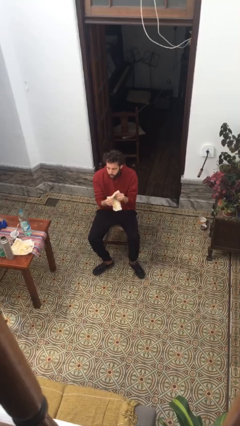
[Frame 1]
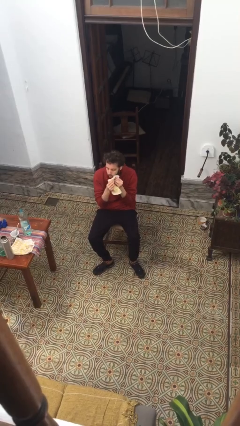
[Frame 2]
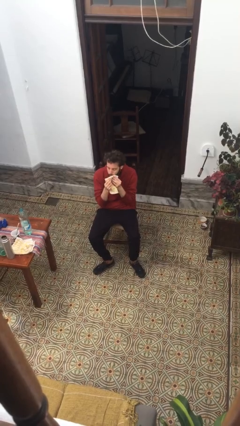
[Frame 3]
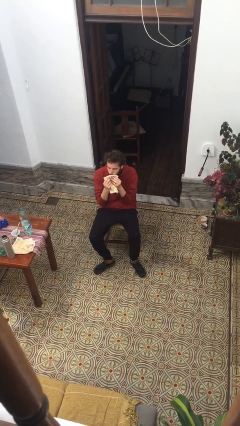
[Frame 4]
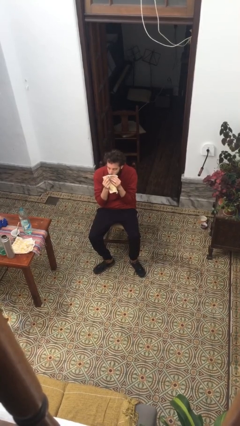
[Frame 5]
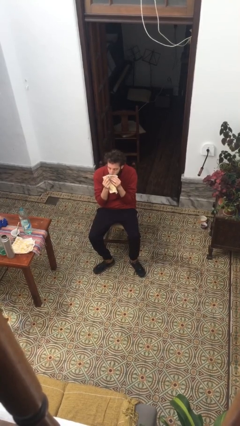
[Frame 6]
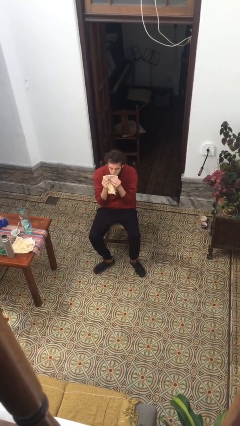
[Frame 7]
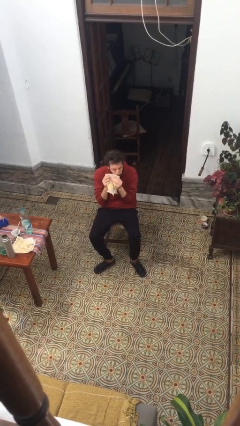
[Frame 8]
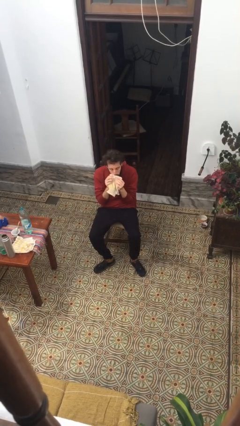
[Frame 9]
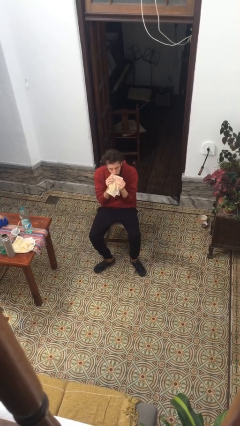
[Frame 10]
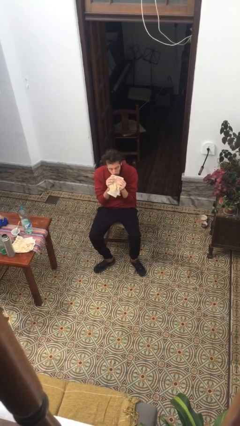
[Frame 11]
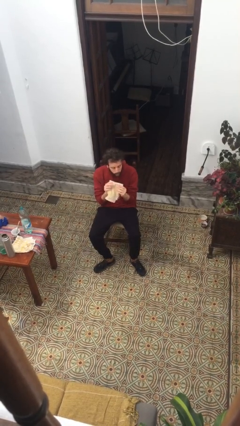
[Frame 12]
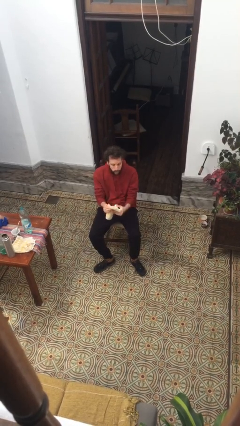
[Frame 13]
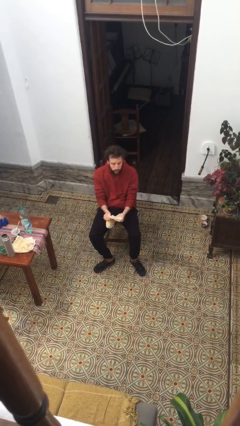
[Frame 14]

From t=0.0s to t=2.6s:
person wipes mouth with napkin

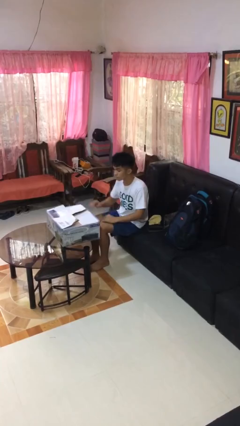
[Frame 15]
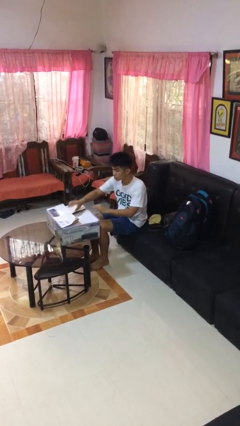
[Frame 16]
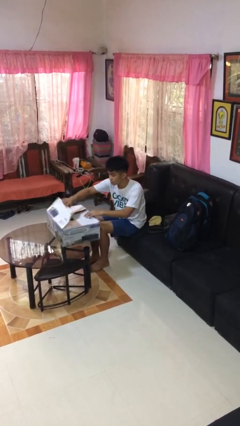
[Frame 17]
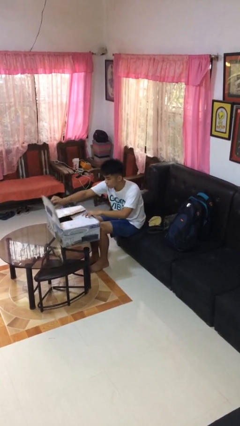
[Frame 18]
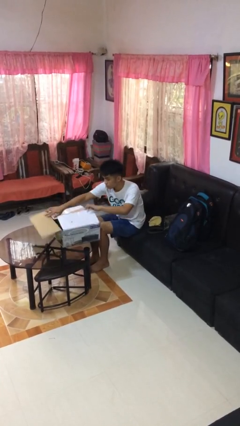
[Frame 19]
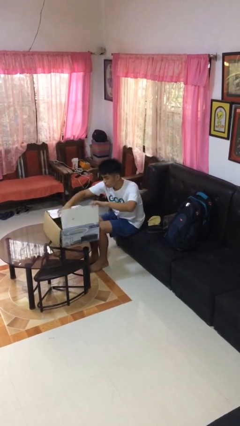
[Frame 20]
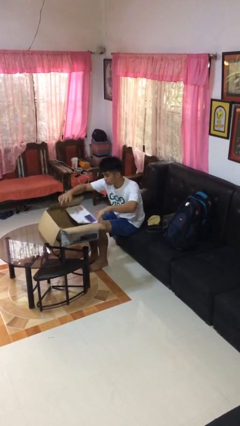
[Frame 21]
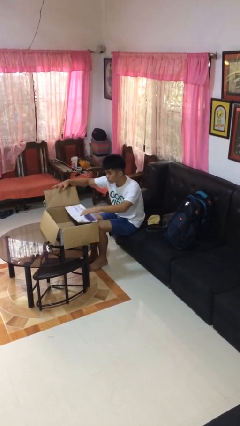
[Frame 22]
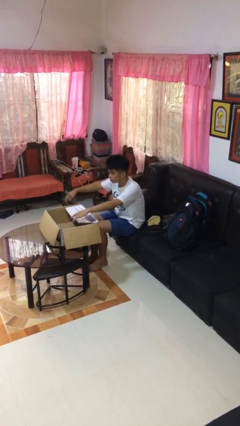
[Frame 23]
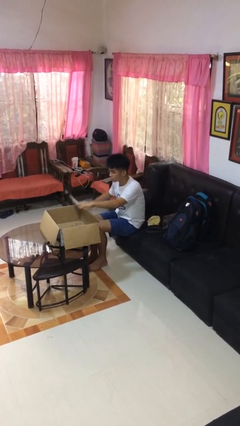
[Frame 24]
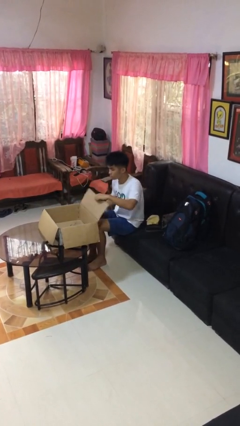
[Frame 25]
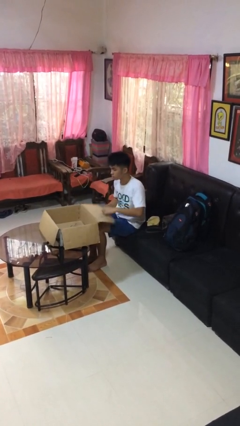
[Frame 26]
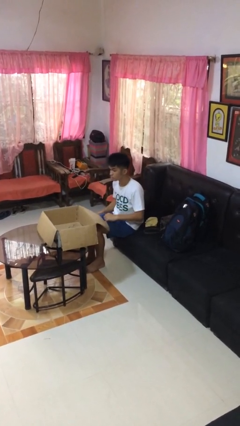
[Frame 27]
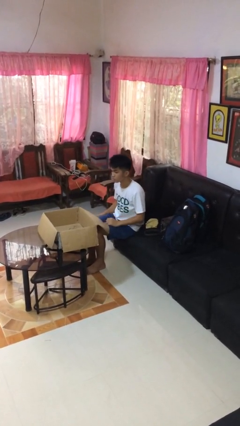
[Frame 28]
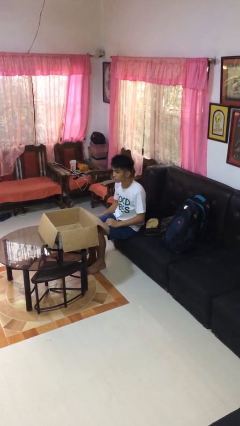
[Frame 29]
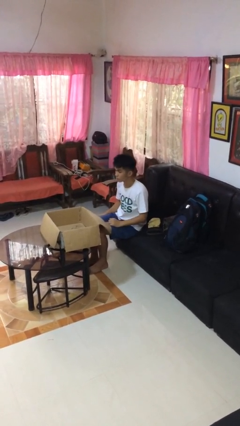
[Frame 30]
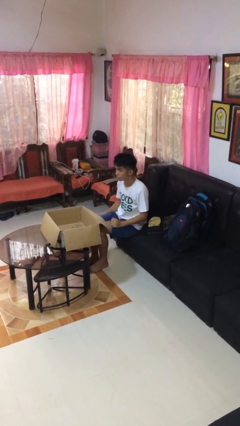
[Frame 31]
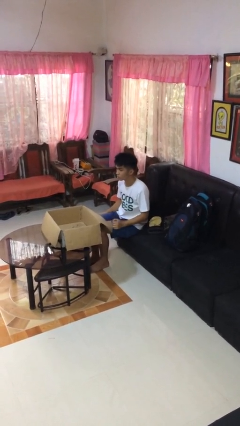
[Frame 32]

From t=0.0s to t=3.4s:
person opens box

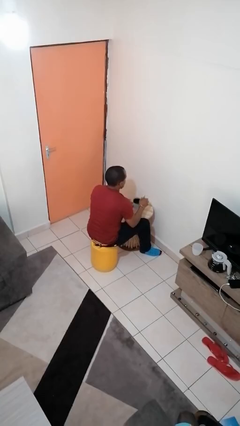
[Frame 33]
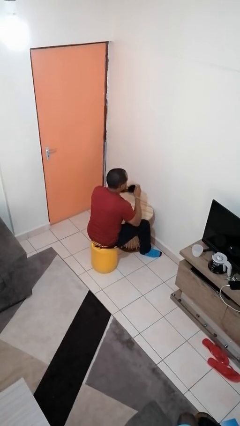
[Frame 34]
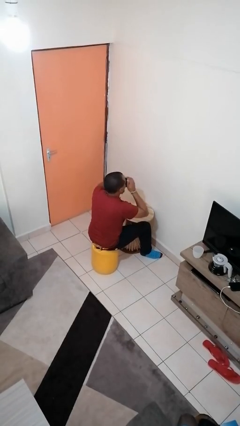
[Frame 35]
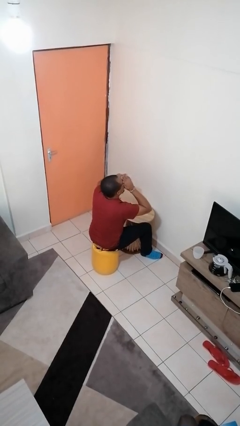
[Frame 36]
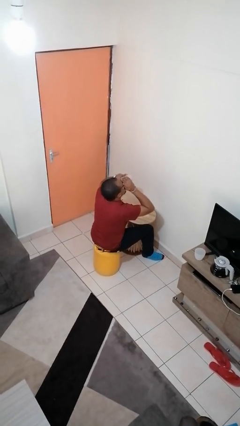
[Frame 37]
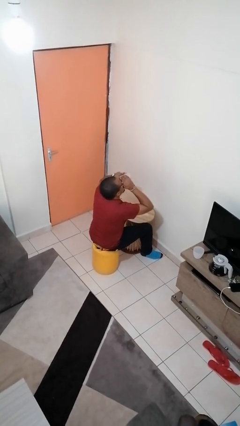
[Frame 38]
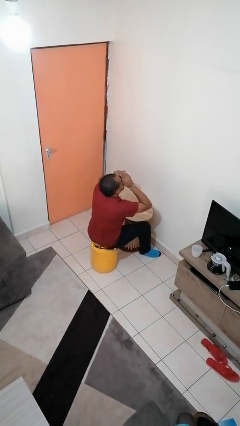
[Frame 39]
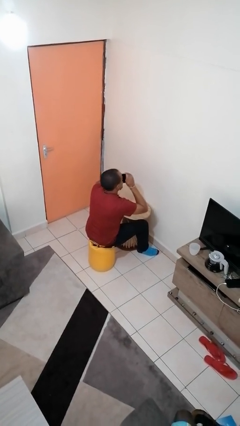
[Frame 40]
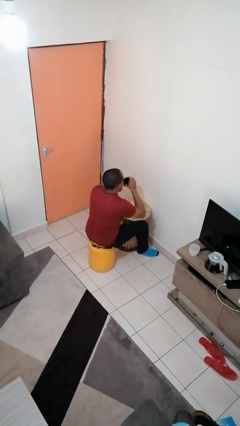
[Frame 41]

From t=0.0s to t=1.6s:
person drinks from mug

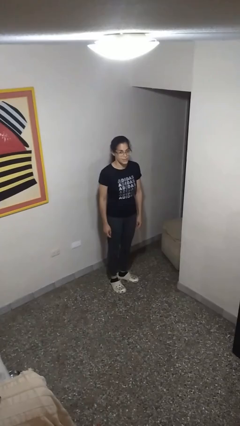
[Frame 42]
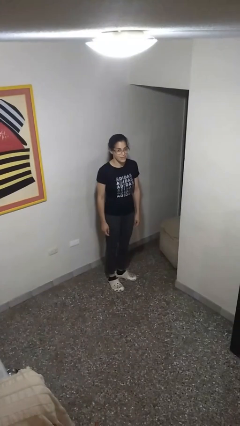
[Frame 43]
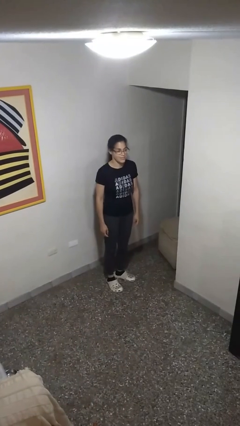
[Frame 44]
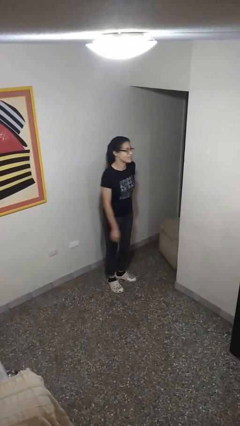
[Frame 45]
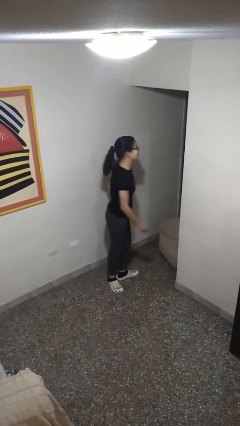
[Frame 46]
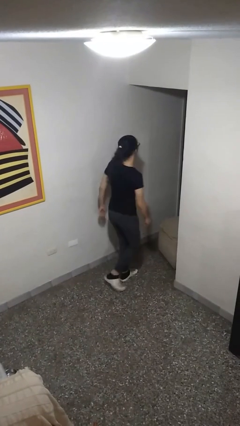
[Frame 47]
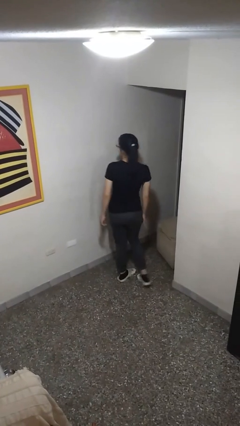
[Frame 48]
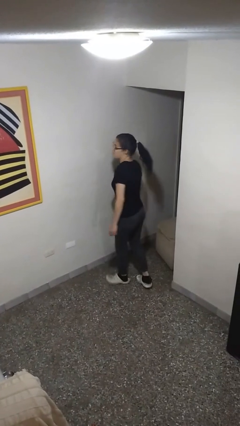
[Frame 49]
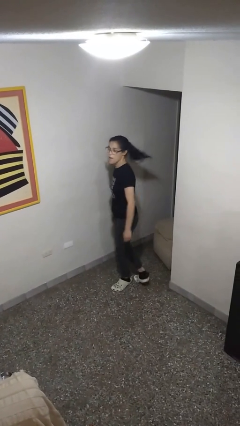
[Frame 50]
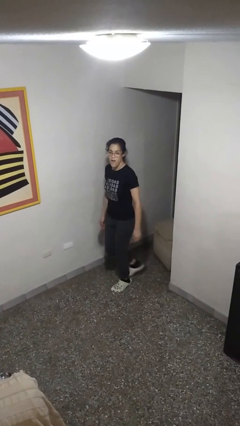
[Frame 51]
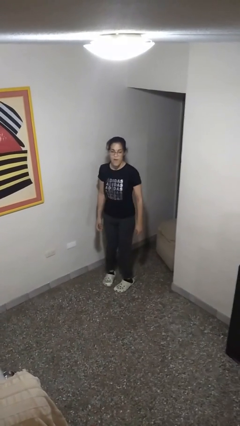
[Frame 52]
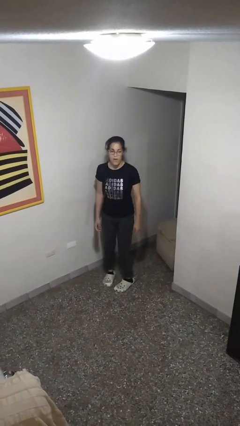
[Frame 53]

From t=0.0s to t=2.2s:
person twirls

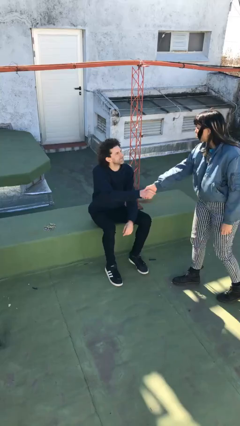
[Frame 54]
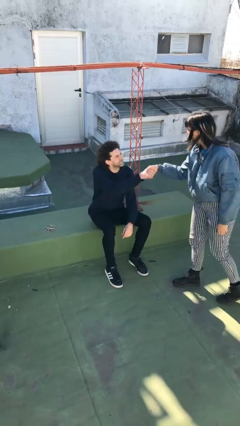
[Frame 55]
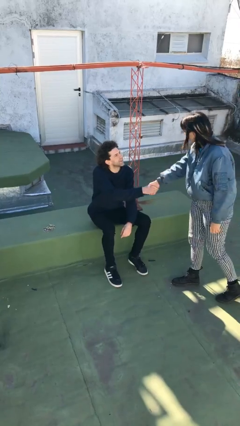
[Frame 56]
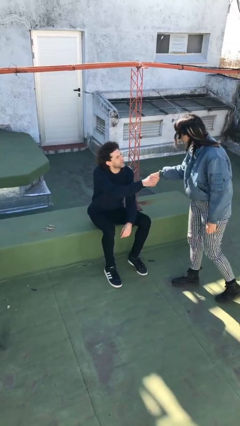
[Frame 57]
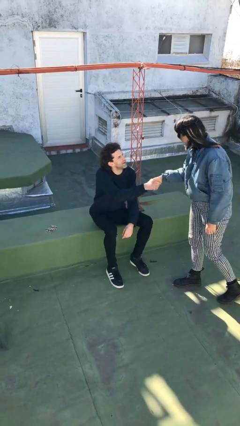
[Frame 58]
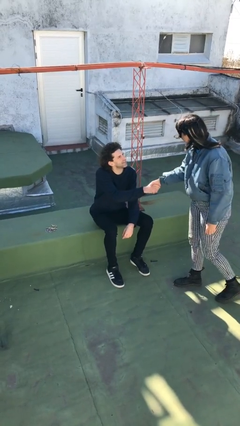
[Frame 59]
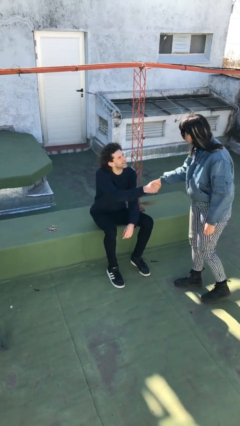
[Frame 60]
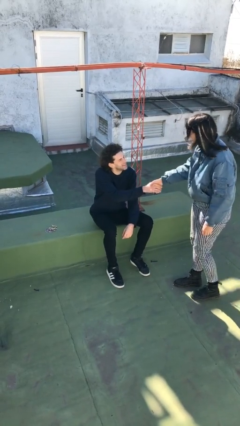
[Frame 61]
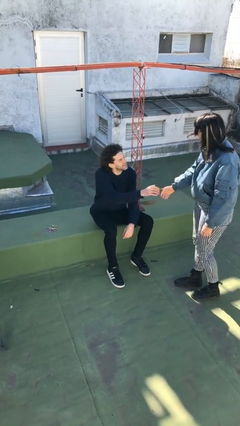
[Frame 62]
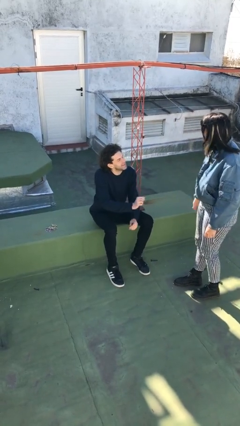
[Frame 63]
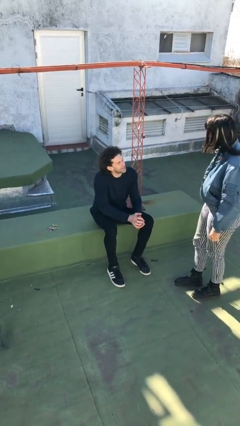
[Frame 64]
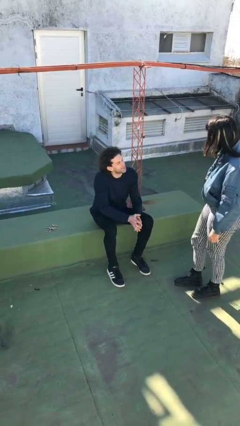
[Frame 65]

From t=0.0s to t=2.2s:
person shakes hand

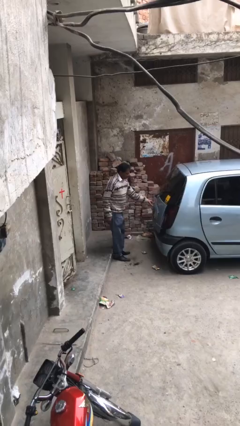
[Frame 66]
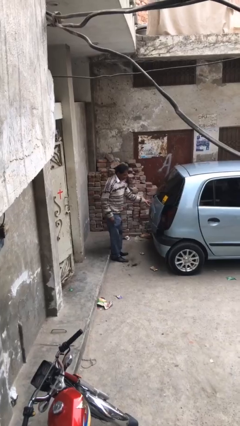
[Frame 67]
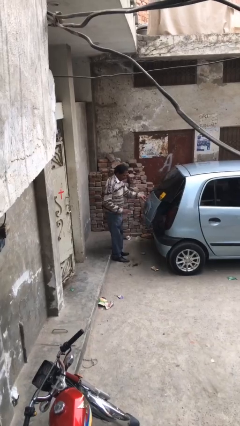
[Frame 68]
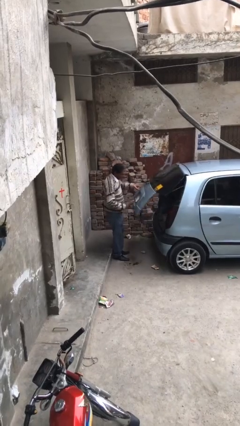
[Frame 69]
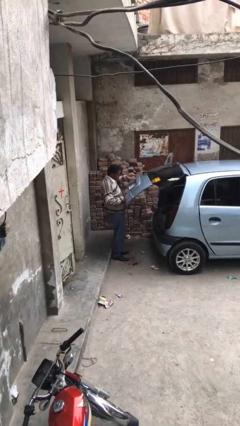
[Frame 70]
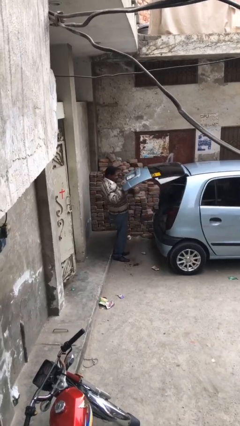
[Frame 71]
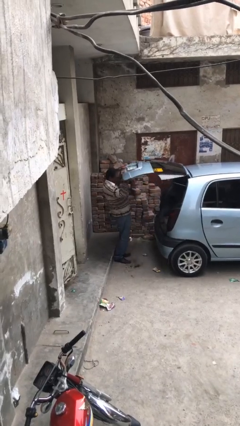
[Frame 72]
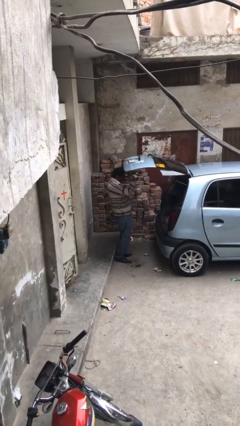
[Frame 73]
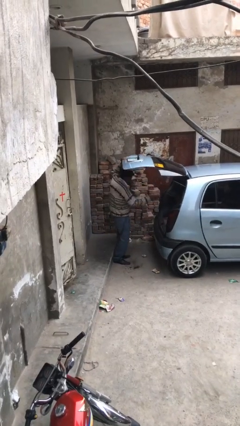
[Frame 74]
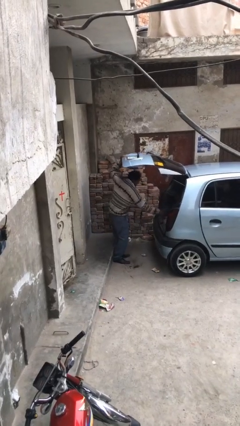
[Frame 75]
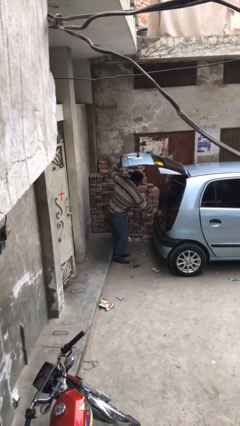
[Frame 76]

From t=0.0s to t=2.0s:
person unloads car

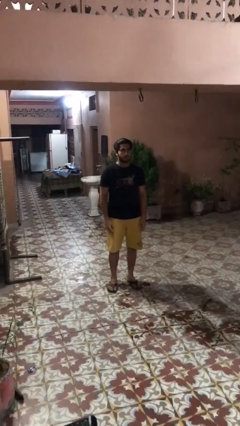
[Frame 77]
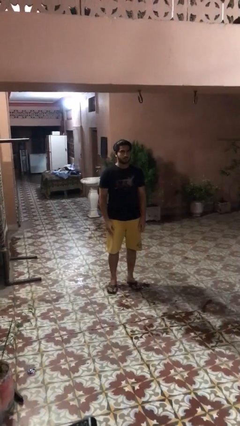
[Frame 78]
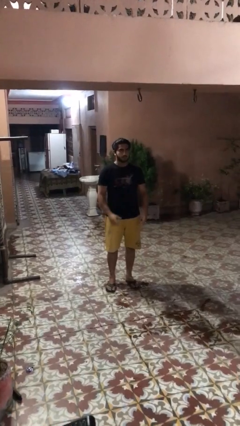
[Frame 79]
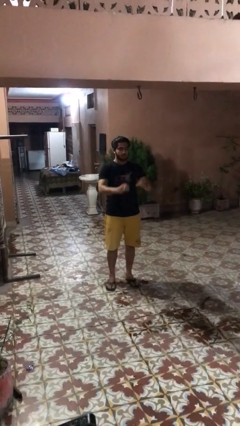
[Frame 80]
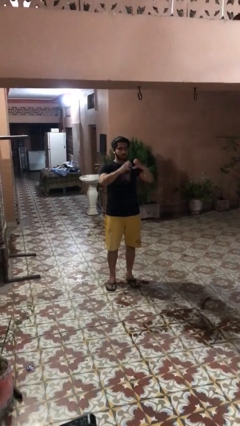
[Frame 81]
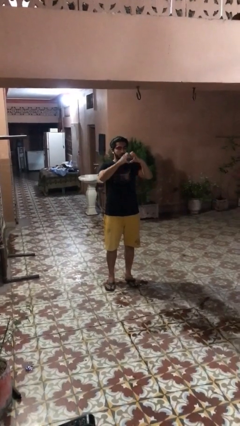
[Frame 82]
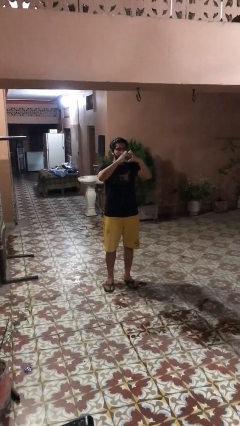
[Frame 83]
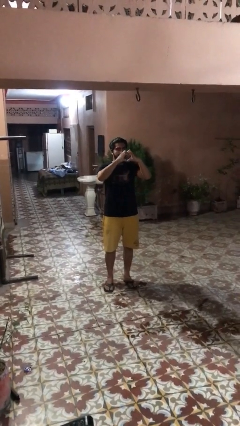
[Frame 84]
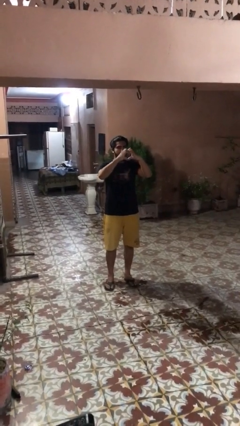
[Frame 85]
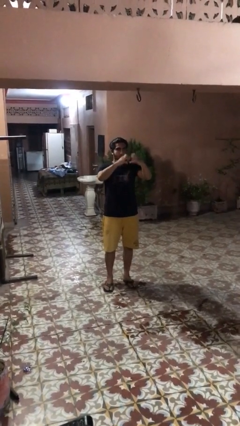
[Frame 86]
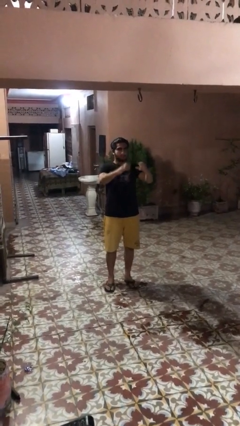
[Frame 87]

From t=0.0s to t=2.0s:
person gestures heart

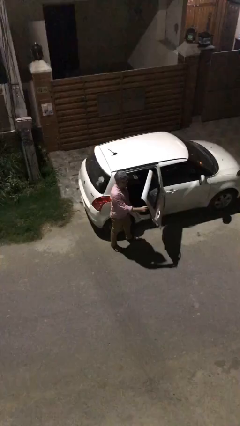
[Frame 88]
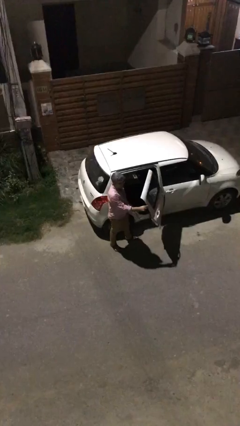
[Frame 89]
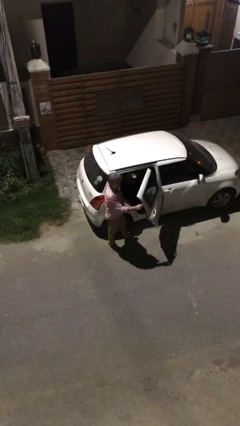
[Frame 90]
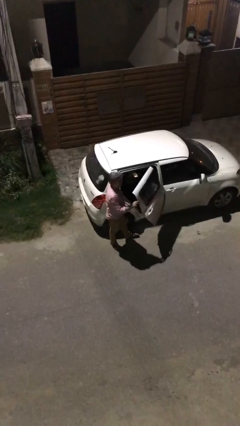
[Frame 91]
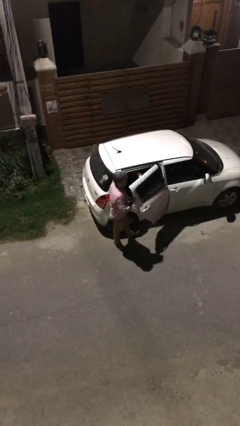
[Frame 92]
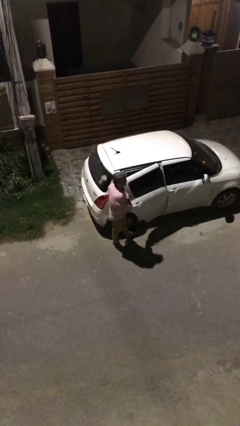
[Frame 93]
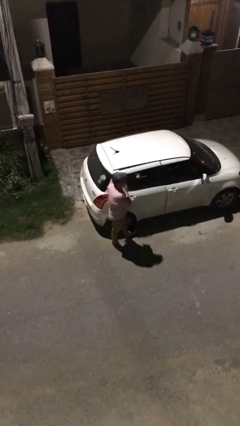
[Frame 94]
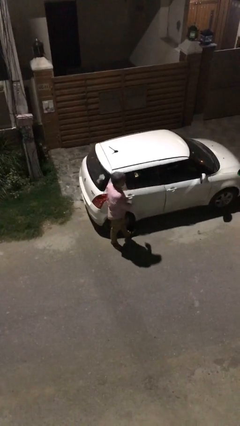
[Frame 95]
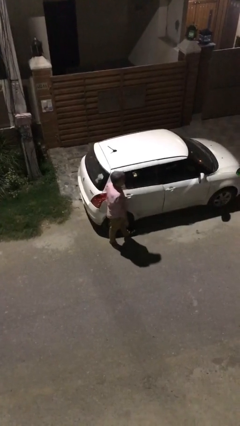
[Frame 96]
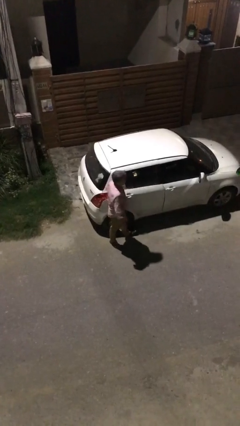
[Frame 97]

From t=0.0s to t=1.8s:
person closes car door
